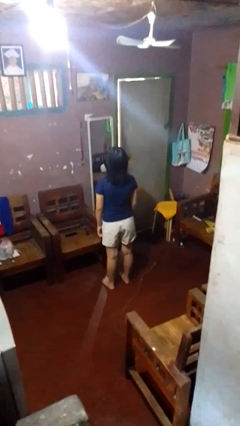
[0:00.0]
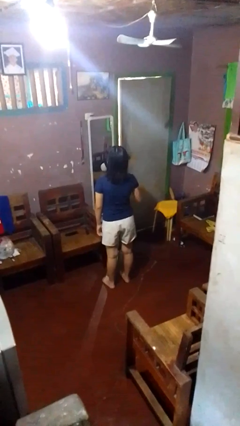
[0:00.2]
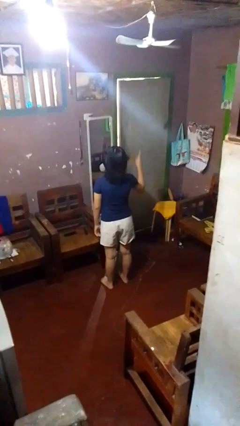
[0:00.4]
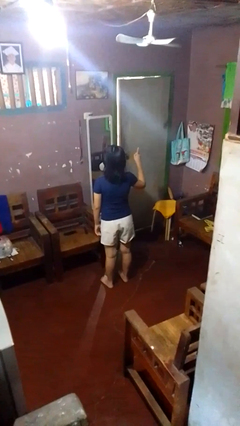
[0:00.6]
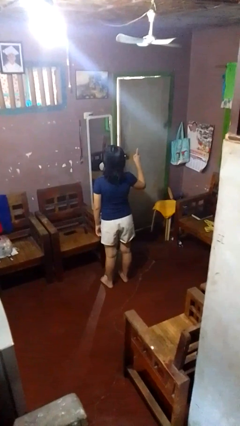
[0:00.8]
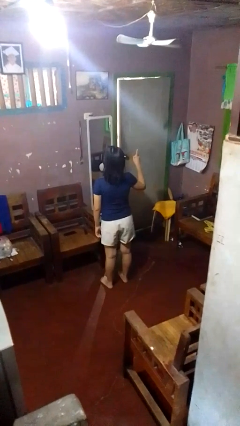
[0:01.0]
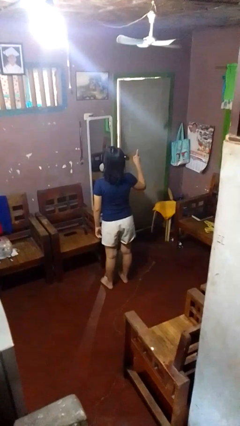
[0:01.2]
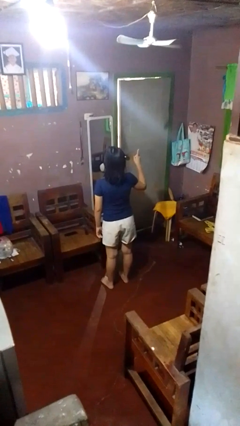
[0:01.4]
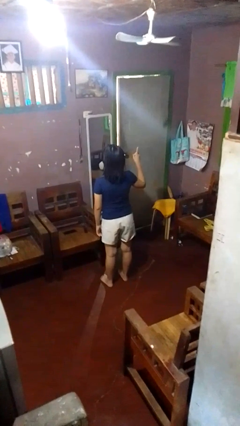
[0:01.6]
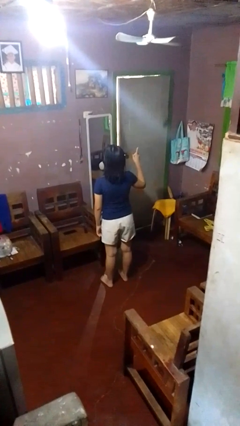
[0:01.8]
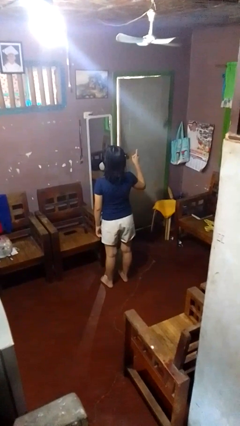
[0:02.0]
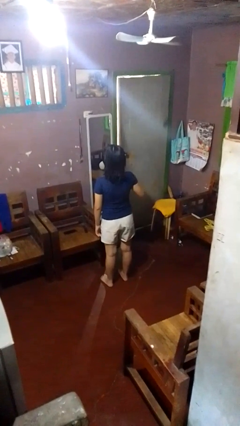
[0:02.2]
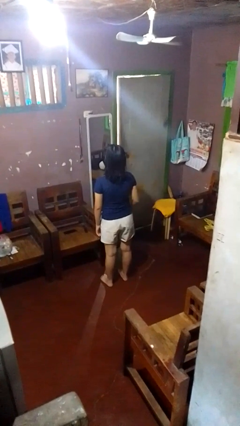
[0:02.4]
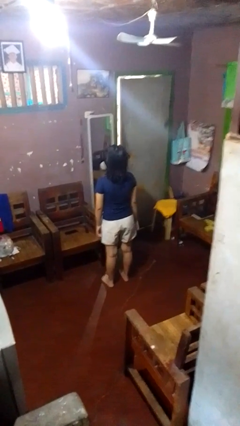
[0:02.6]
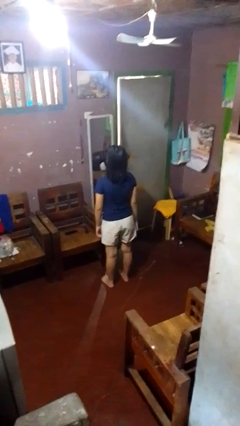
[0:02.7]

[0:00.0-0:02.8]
person gestures number one

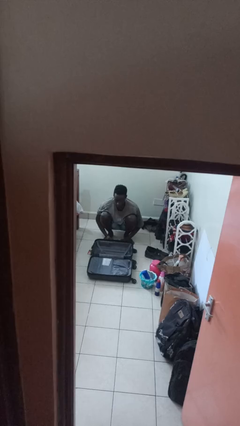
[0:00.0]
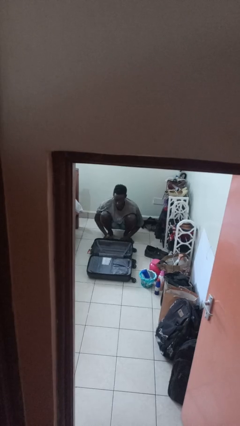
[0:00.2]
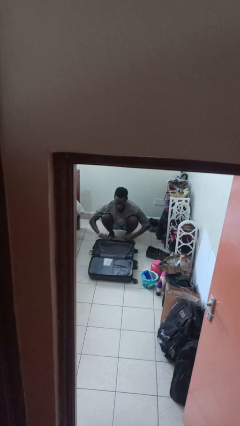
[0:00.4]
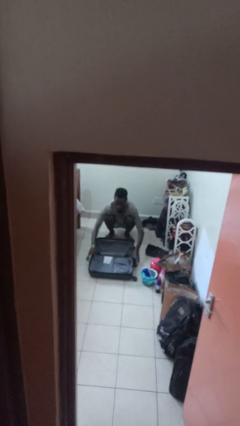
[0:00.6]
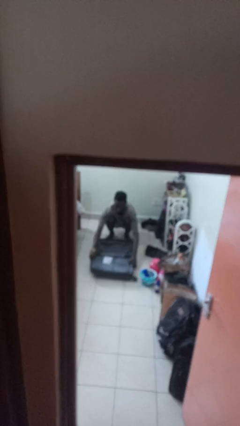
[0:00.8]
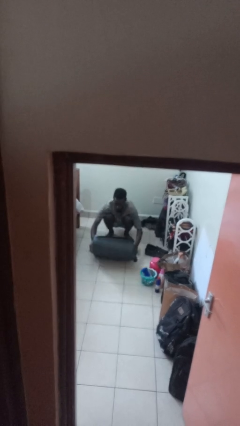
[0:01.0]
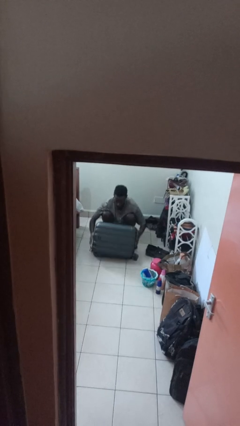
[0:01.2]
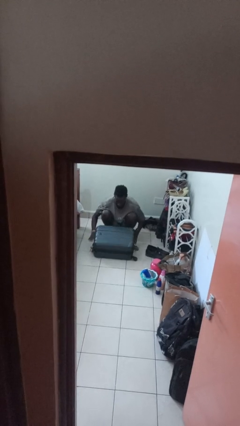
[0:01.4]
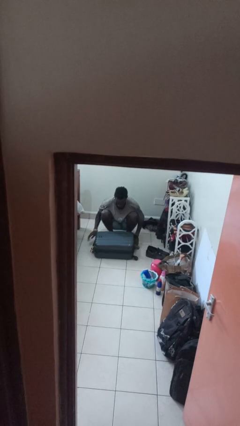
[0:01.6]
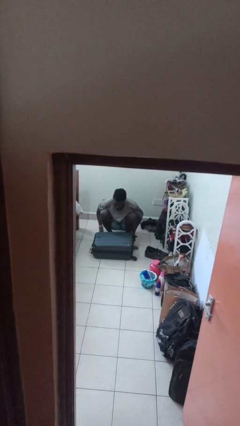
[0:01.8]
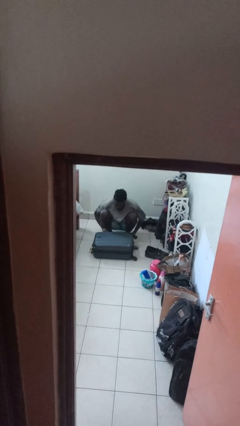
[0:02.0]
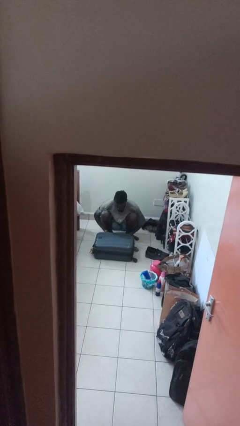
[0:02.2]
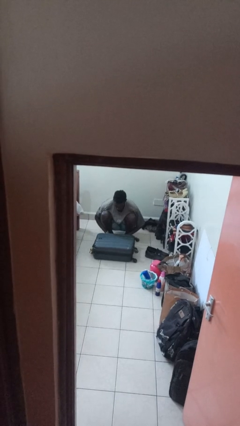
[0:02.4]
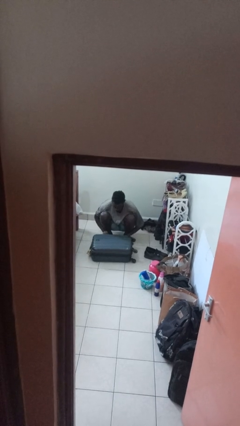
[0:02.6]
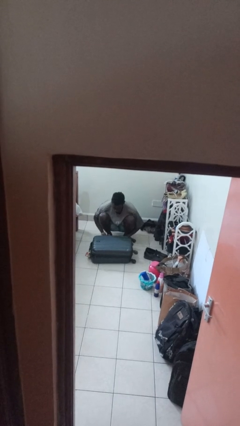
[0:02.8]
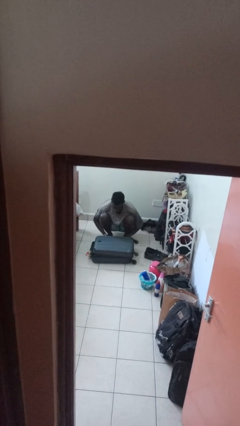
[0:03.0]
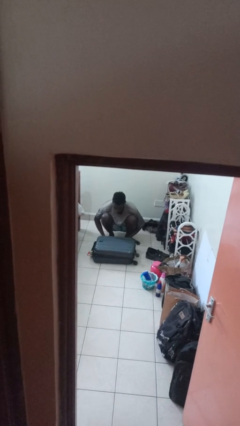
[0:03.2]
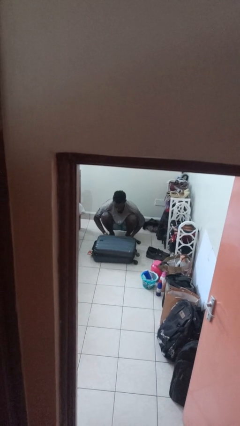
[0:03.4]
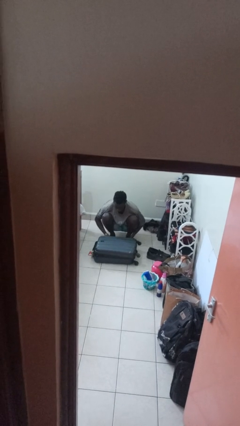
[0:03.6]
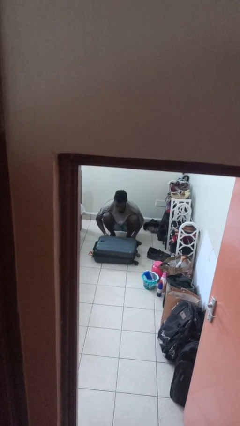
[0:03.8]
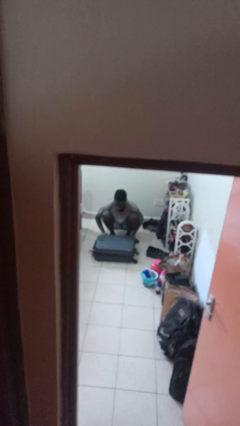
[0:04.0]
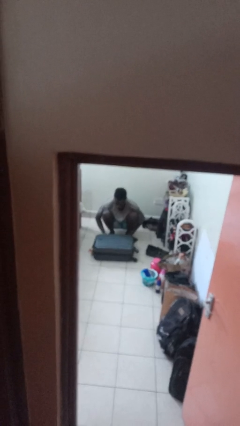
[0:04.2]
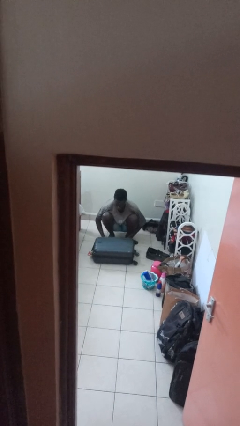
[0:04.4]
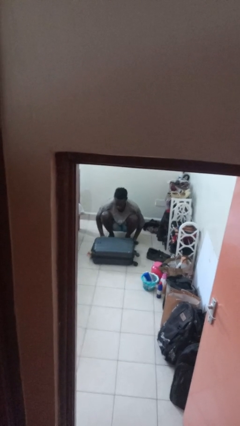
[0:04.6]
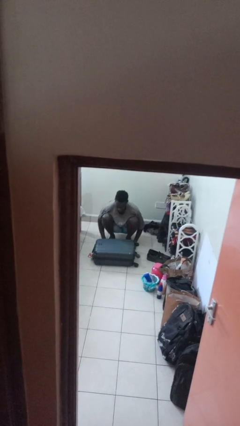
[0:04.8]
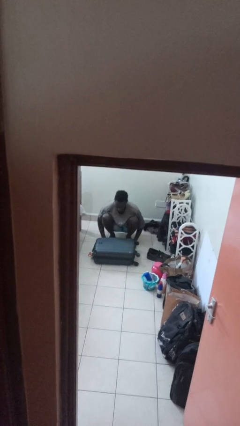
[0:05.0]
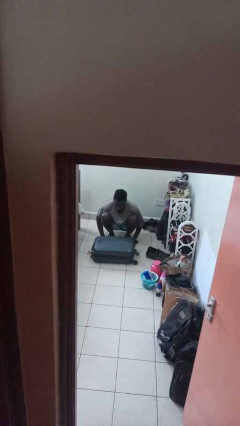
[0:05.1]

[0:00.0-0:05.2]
person closes suitcase

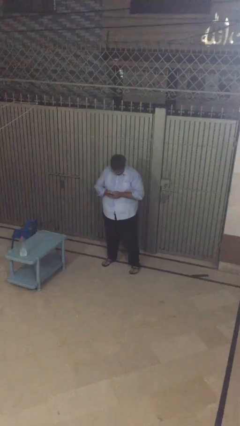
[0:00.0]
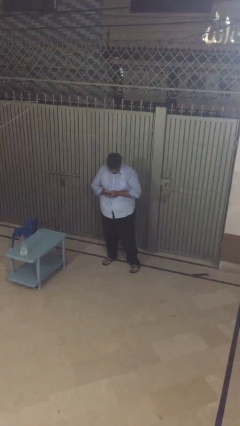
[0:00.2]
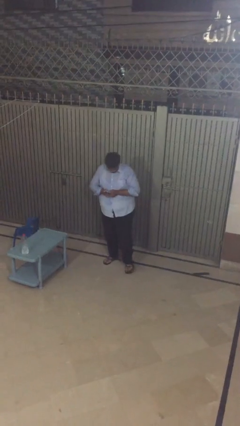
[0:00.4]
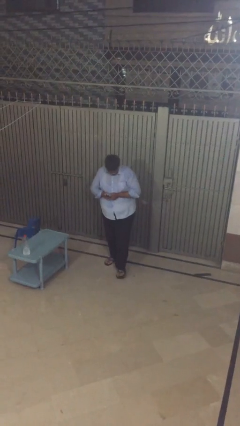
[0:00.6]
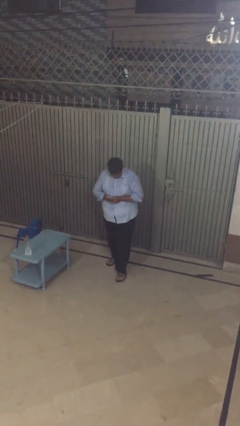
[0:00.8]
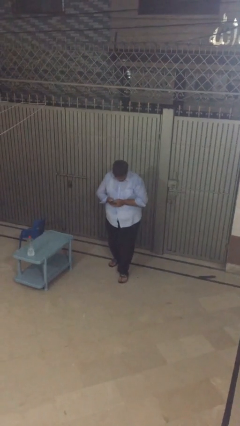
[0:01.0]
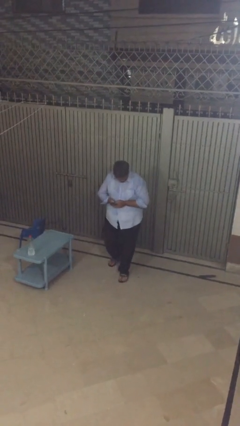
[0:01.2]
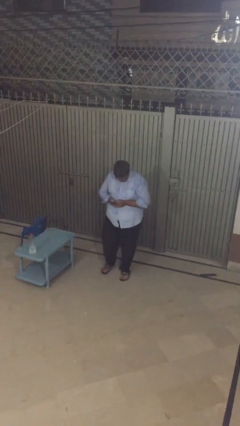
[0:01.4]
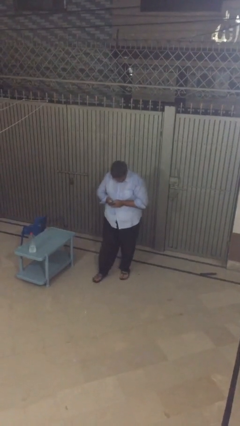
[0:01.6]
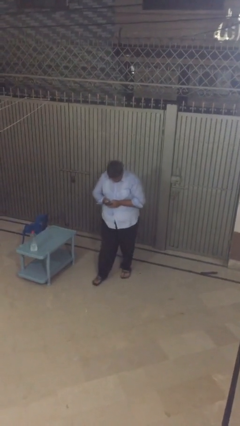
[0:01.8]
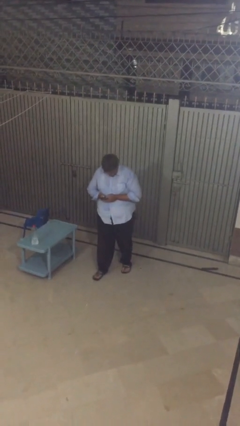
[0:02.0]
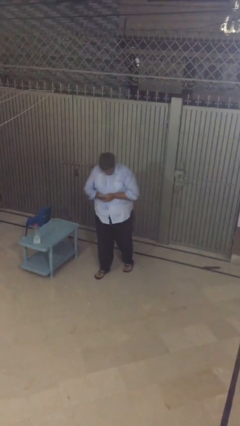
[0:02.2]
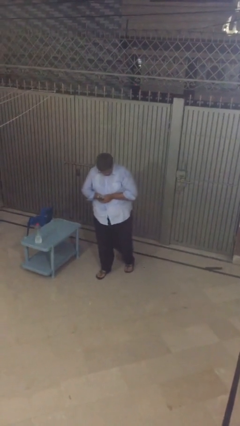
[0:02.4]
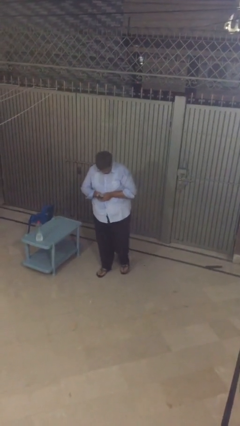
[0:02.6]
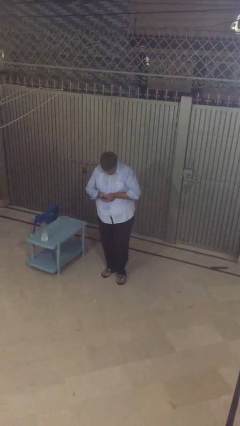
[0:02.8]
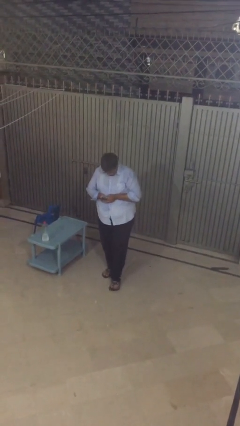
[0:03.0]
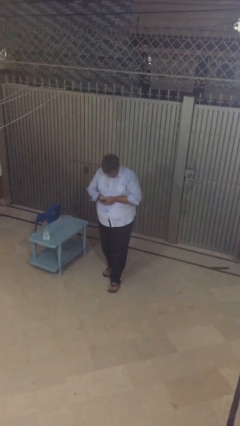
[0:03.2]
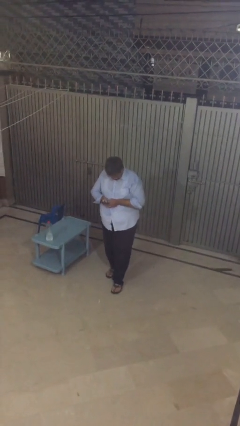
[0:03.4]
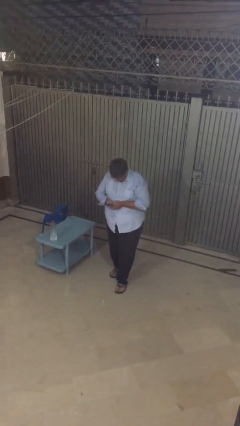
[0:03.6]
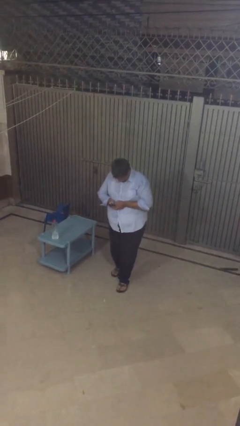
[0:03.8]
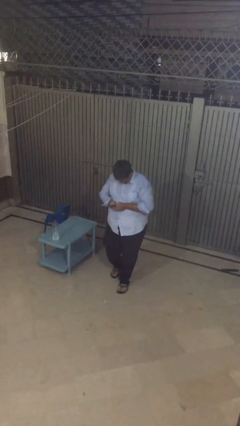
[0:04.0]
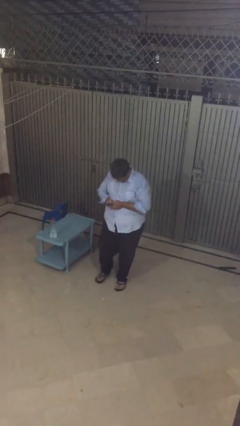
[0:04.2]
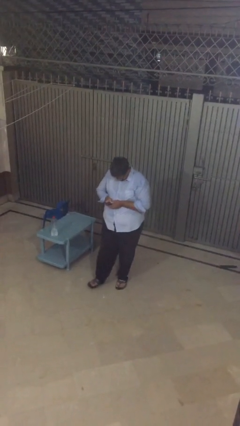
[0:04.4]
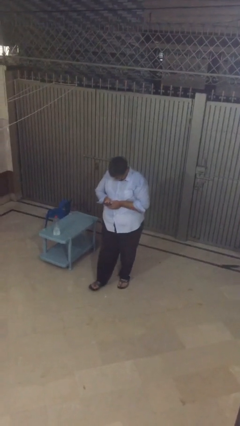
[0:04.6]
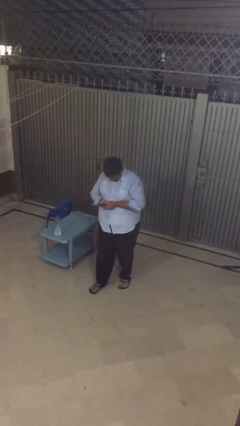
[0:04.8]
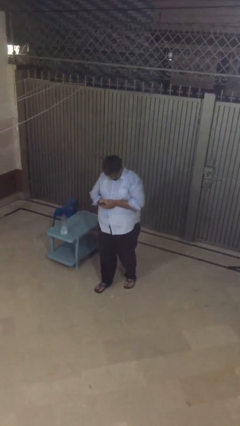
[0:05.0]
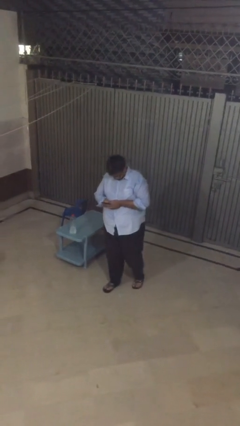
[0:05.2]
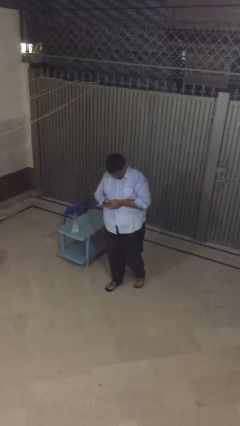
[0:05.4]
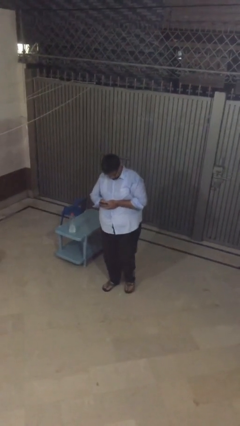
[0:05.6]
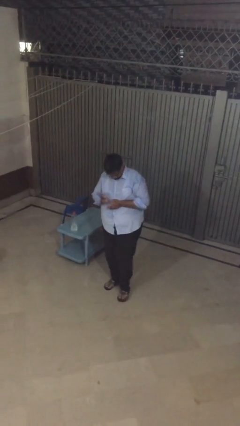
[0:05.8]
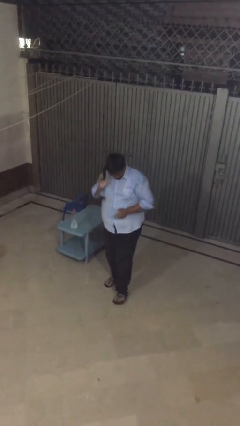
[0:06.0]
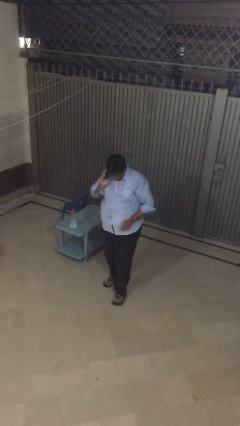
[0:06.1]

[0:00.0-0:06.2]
person texts on phone

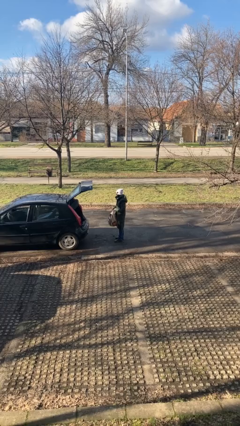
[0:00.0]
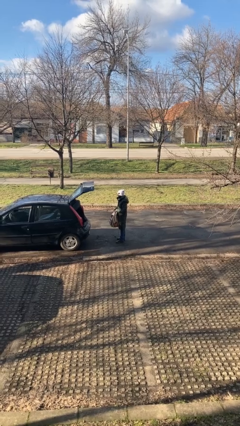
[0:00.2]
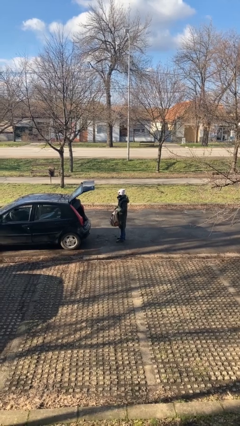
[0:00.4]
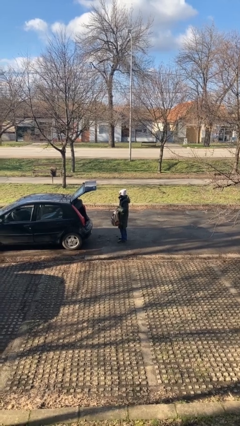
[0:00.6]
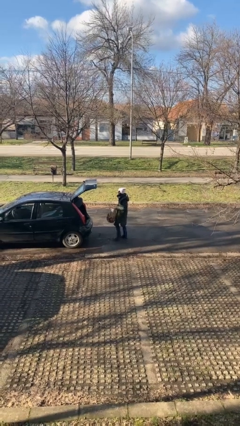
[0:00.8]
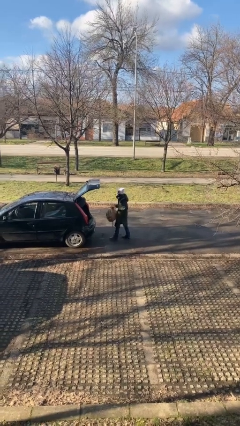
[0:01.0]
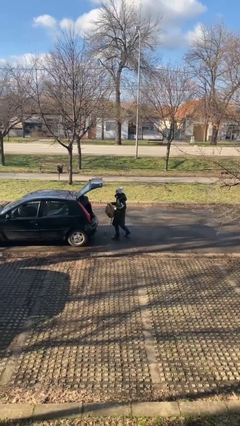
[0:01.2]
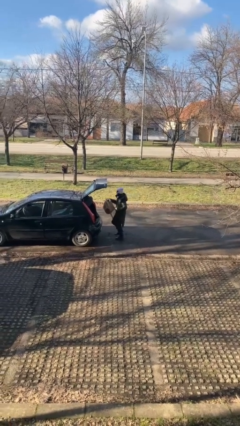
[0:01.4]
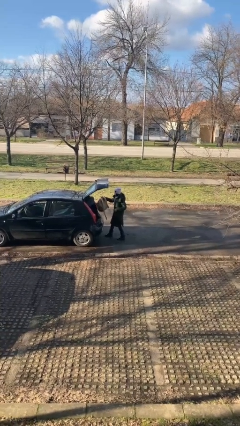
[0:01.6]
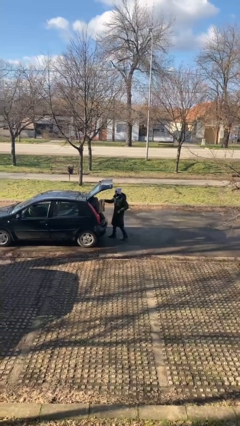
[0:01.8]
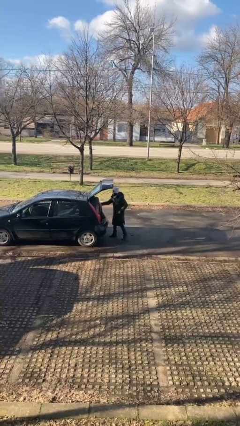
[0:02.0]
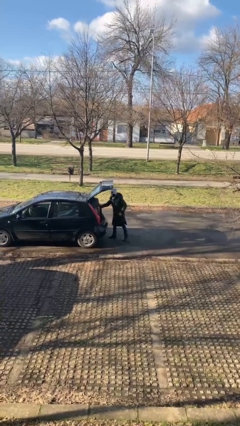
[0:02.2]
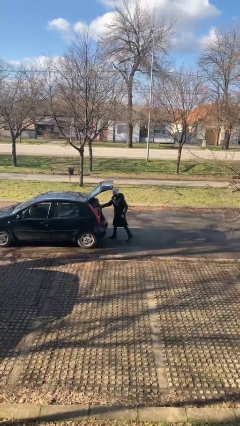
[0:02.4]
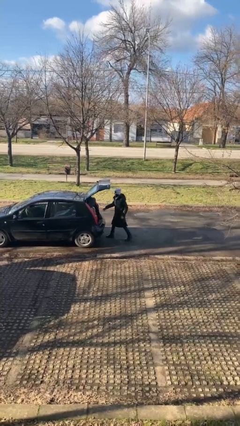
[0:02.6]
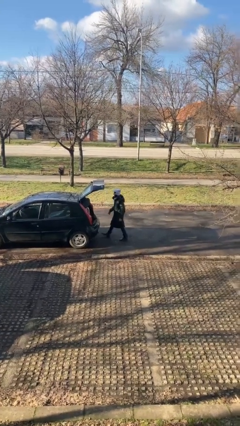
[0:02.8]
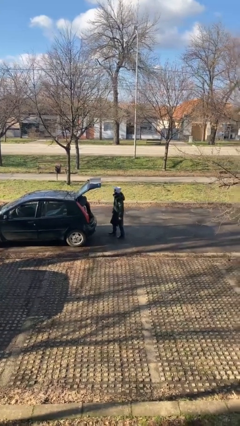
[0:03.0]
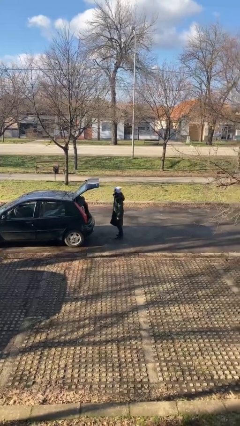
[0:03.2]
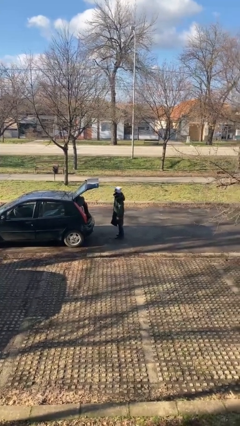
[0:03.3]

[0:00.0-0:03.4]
person loads car

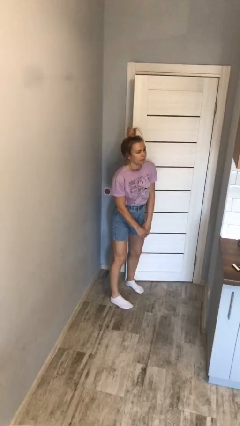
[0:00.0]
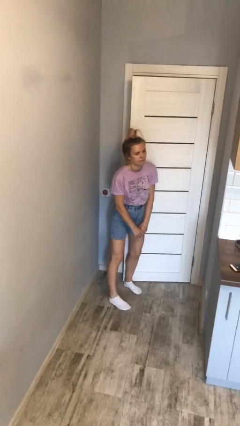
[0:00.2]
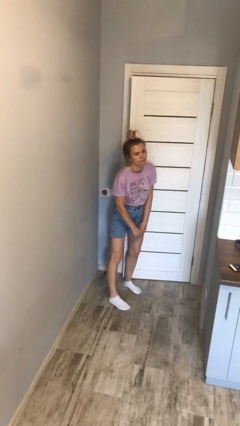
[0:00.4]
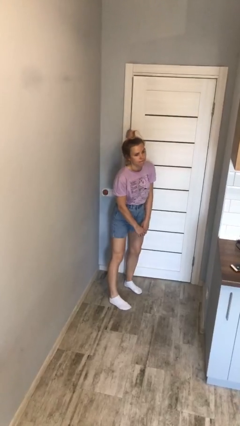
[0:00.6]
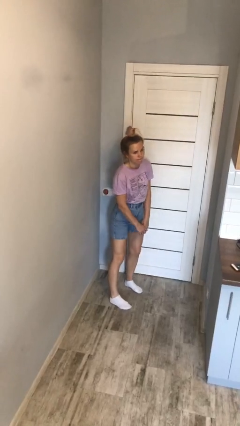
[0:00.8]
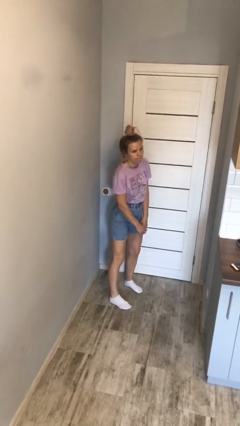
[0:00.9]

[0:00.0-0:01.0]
person closes door with hip
